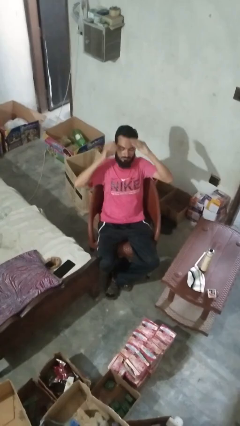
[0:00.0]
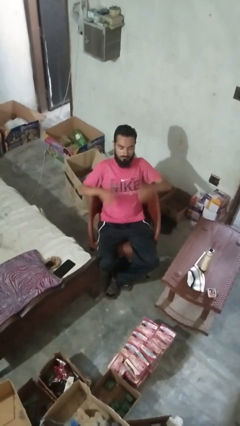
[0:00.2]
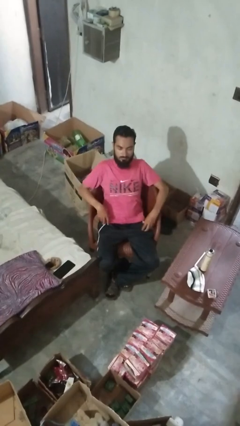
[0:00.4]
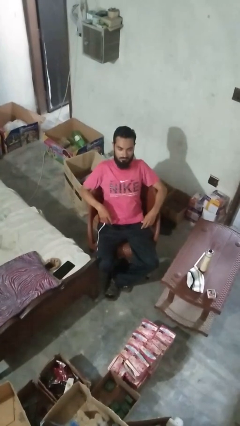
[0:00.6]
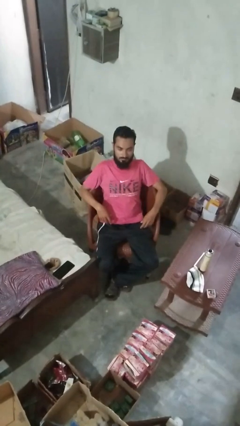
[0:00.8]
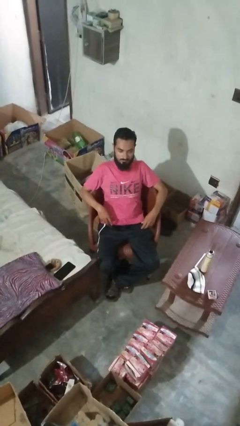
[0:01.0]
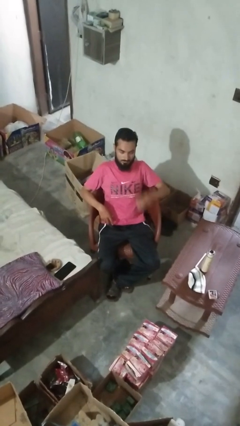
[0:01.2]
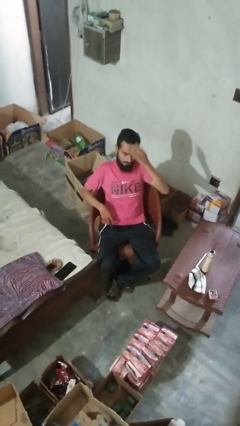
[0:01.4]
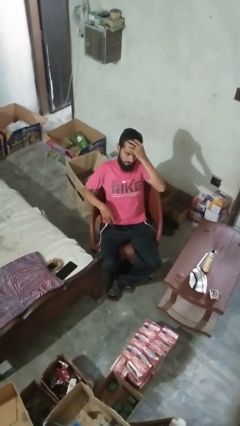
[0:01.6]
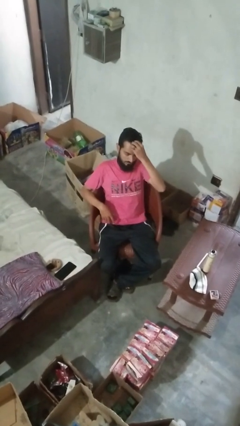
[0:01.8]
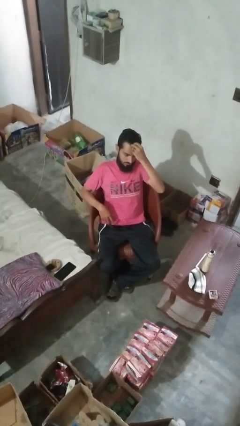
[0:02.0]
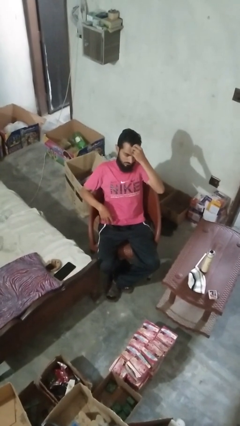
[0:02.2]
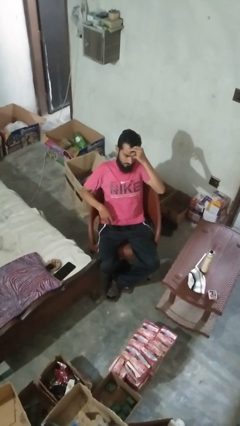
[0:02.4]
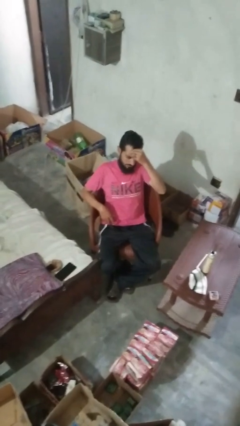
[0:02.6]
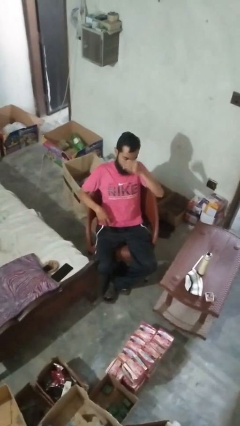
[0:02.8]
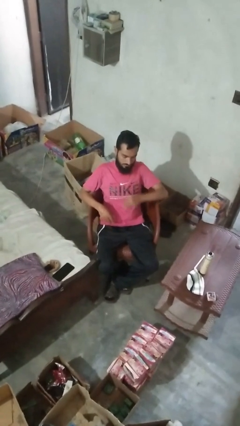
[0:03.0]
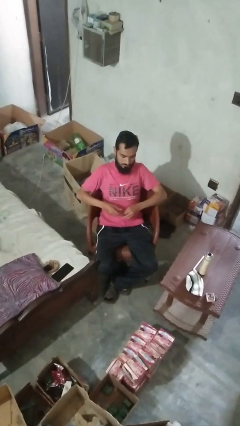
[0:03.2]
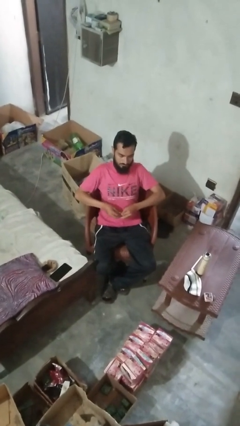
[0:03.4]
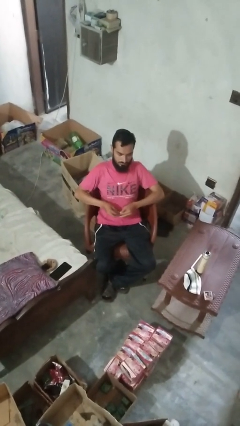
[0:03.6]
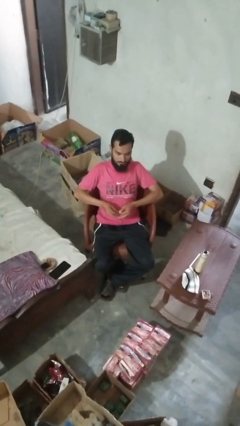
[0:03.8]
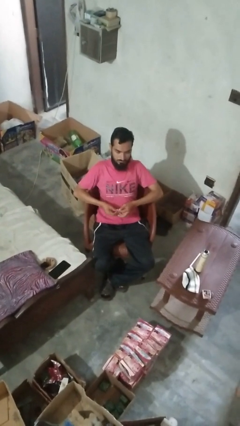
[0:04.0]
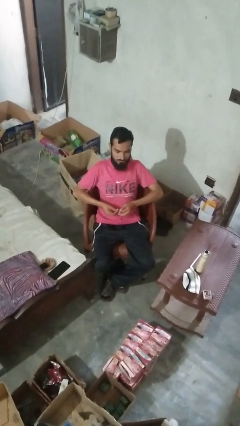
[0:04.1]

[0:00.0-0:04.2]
person takes off hairtie

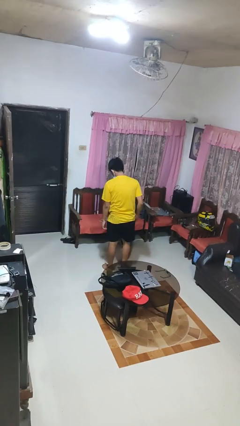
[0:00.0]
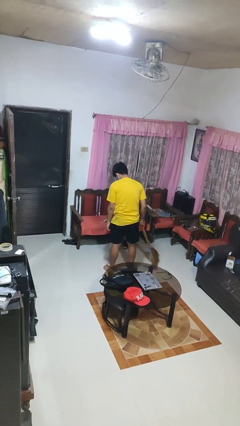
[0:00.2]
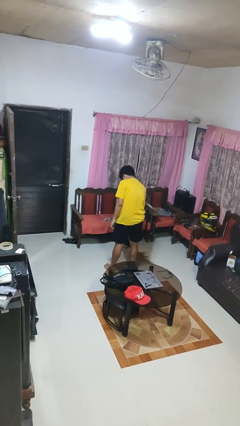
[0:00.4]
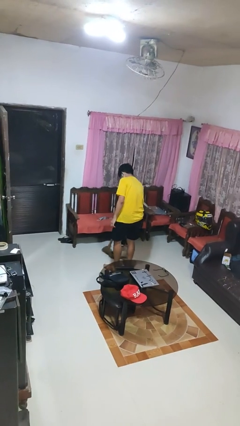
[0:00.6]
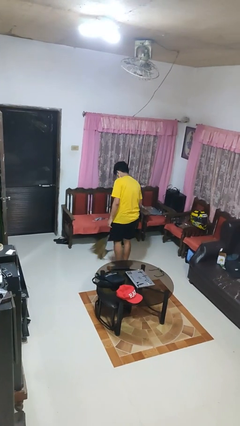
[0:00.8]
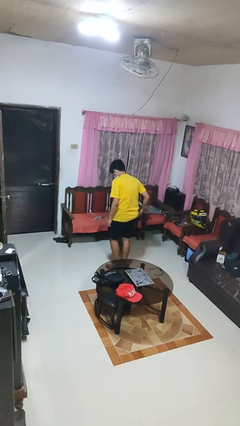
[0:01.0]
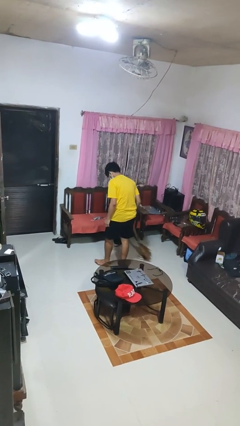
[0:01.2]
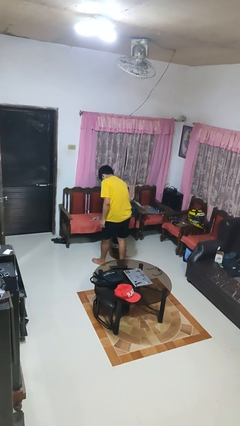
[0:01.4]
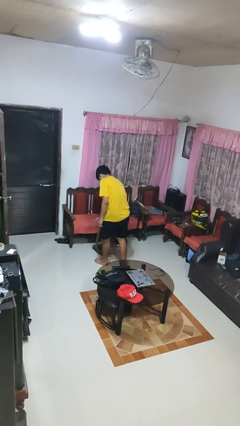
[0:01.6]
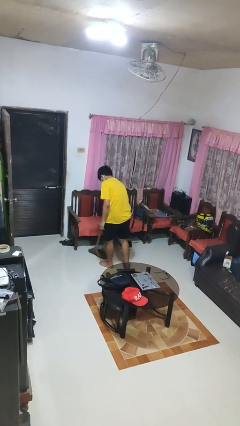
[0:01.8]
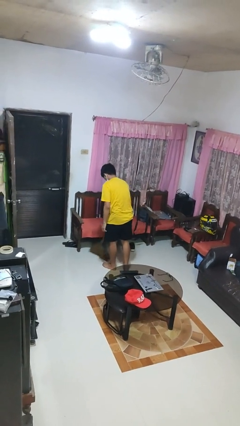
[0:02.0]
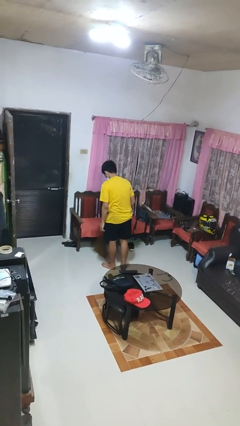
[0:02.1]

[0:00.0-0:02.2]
person sweeps floor

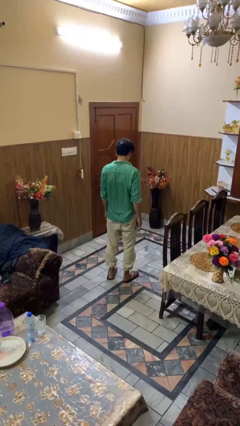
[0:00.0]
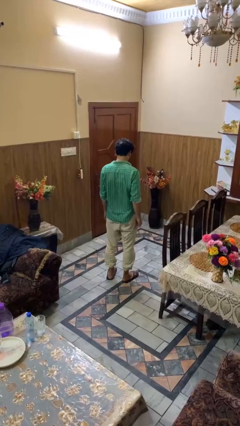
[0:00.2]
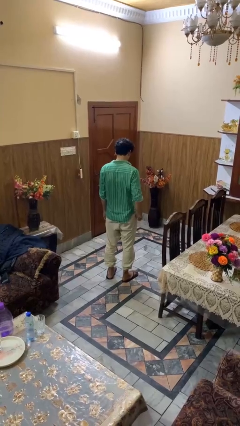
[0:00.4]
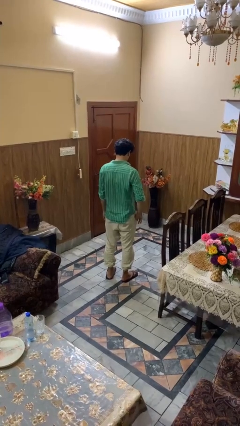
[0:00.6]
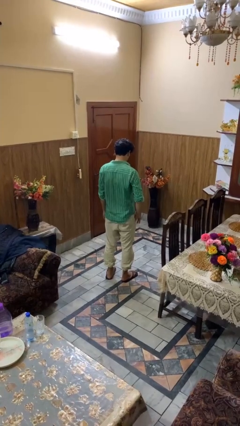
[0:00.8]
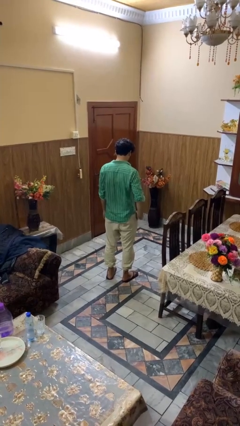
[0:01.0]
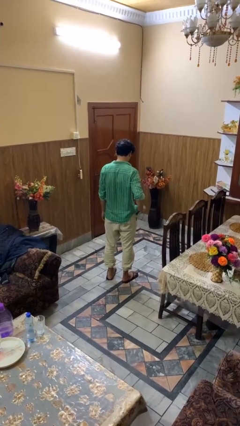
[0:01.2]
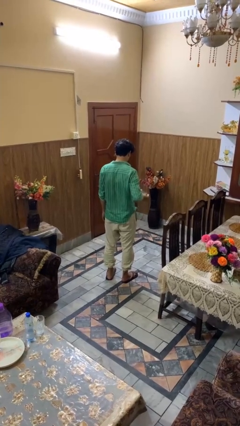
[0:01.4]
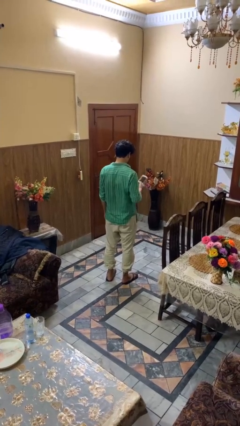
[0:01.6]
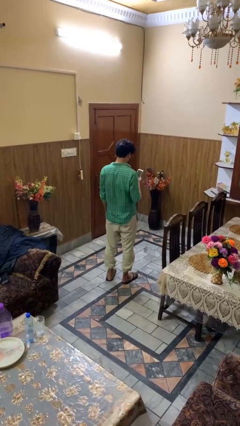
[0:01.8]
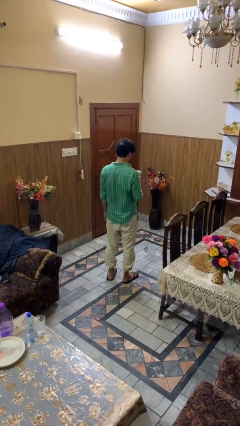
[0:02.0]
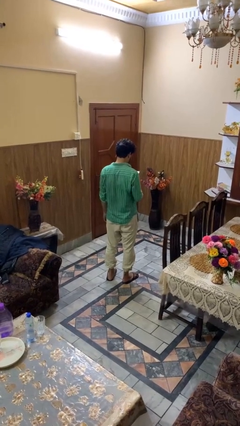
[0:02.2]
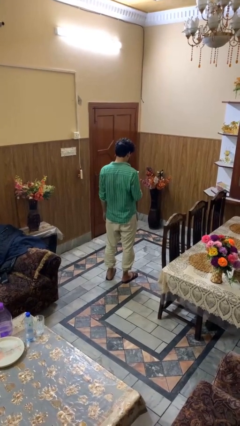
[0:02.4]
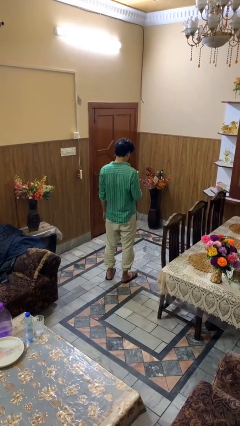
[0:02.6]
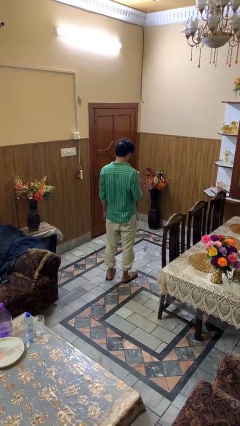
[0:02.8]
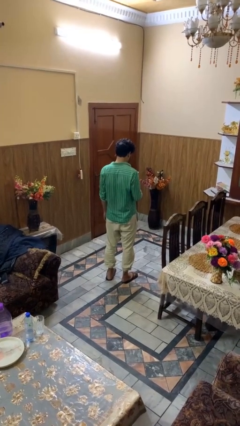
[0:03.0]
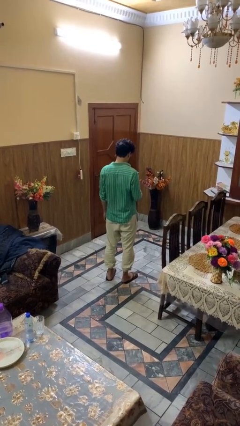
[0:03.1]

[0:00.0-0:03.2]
person takes phone from pocket

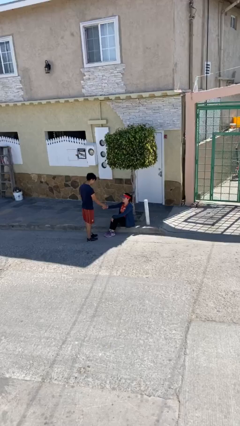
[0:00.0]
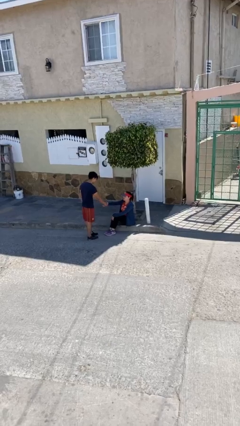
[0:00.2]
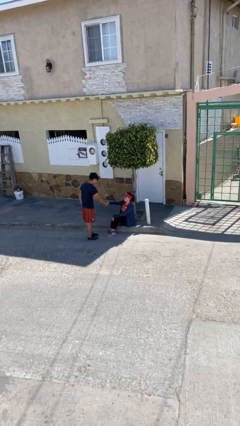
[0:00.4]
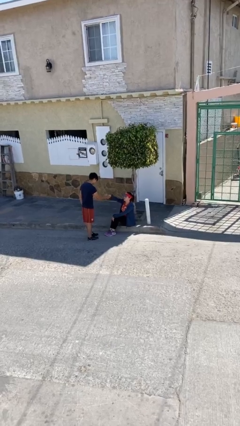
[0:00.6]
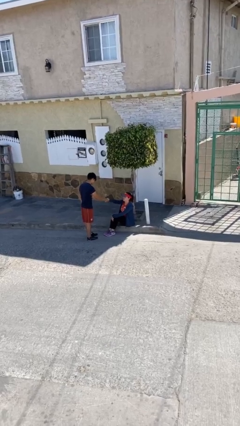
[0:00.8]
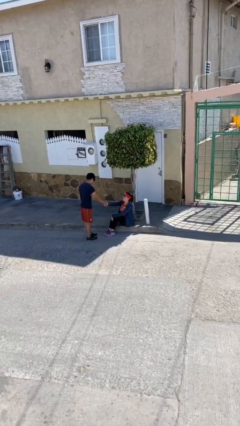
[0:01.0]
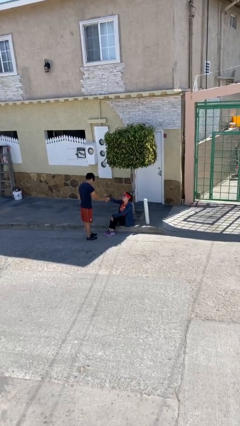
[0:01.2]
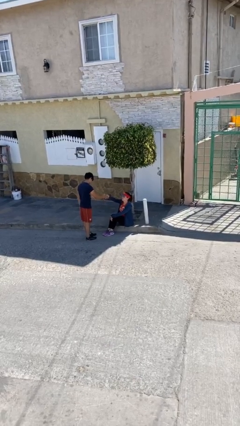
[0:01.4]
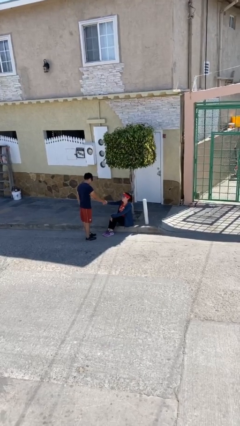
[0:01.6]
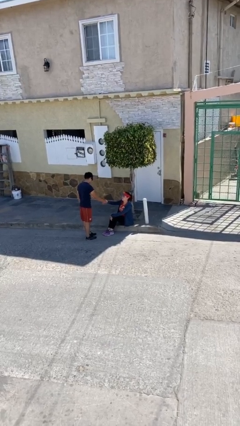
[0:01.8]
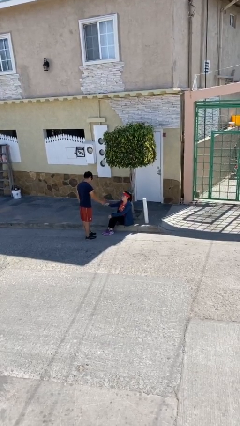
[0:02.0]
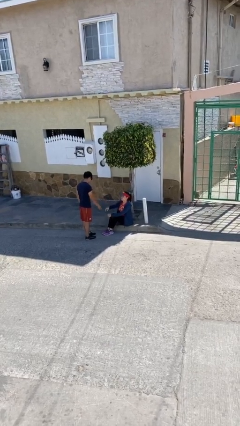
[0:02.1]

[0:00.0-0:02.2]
person shakes hand

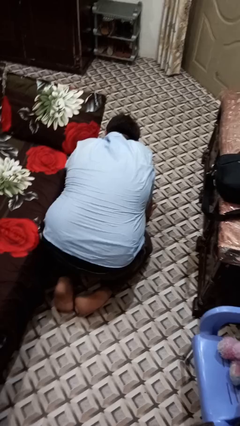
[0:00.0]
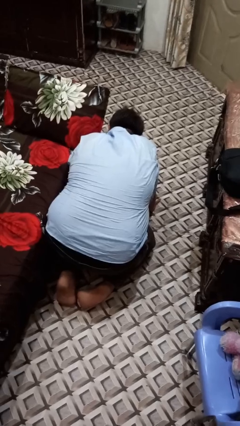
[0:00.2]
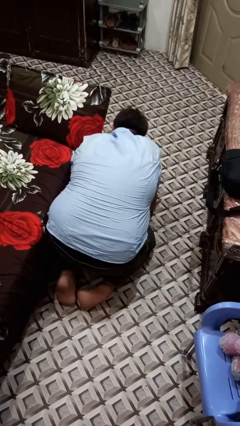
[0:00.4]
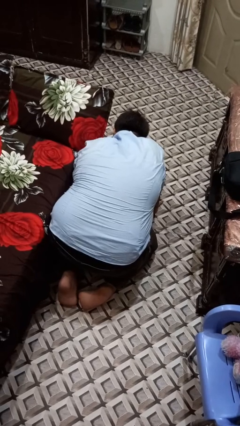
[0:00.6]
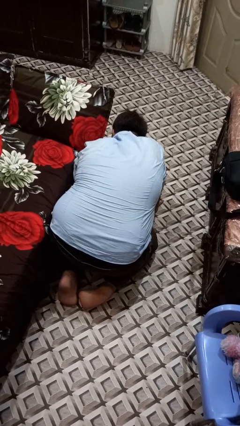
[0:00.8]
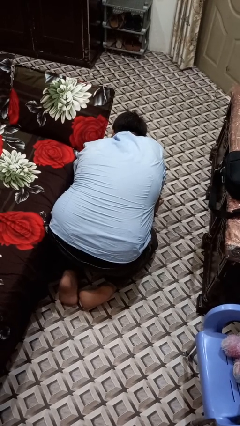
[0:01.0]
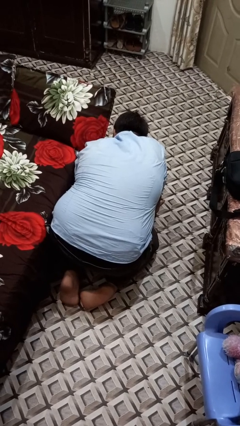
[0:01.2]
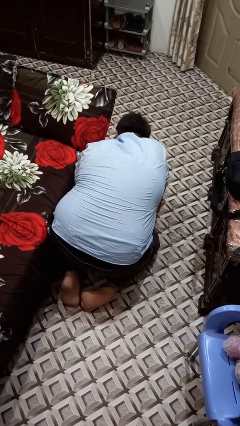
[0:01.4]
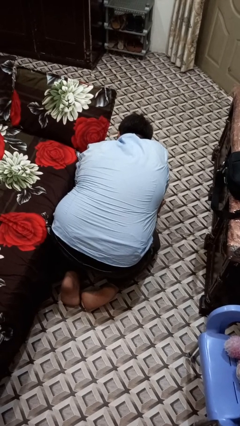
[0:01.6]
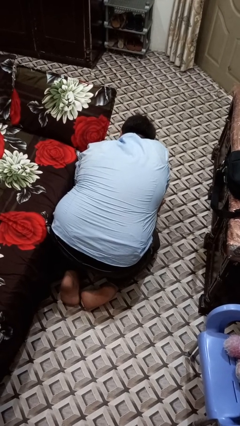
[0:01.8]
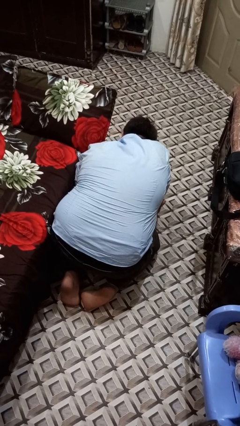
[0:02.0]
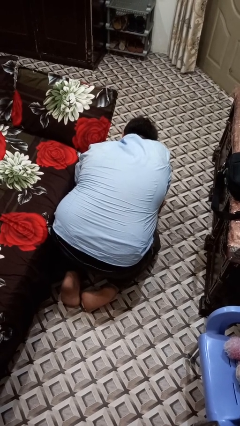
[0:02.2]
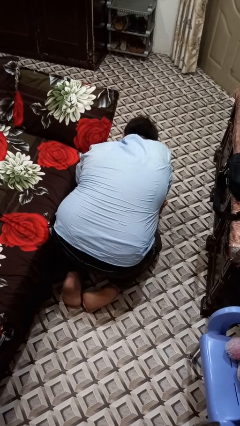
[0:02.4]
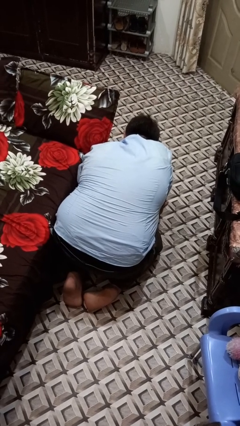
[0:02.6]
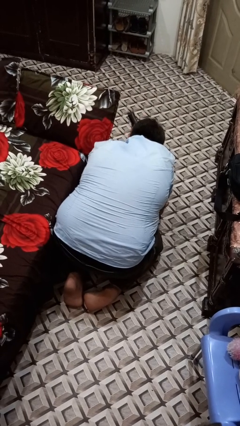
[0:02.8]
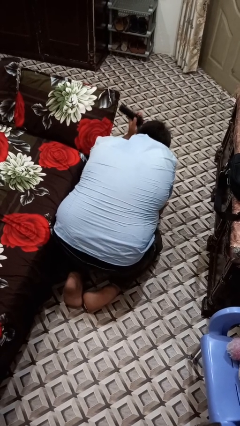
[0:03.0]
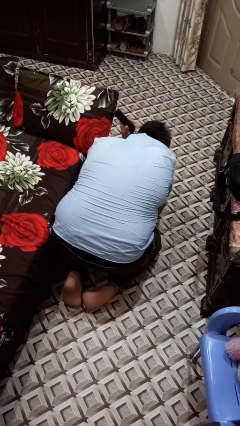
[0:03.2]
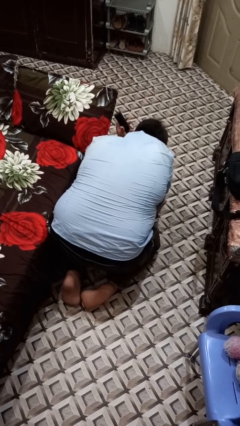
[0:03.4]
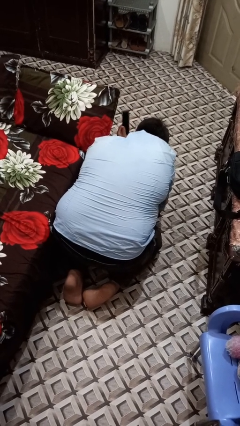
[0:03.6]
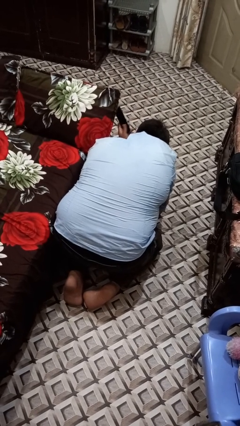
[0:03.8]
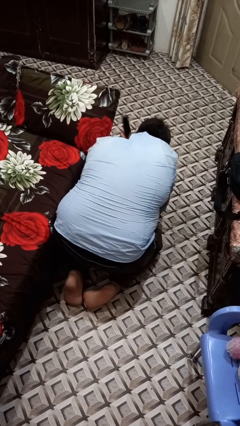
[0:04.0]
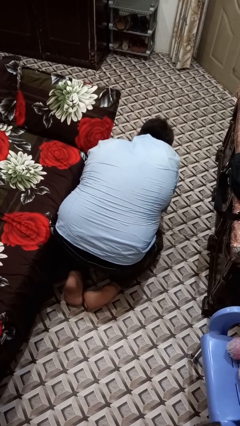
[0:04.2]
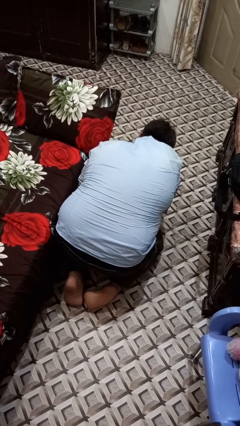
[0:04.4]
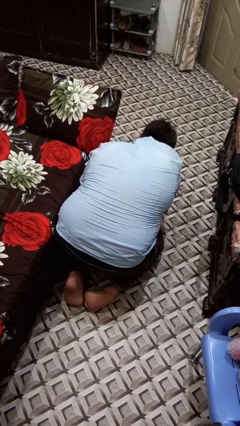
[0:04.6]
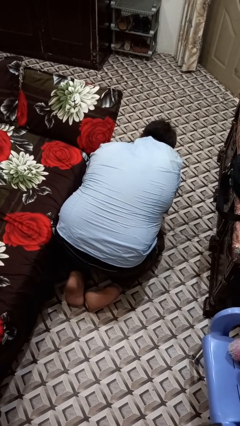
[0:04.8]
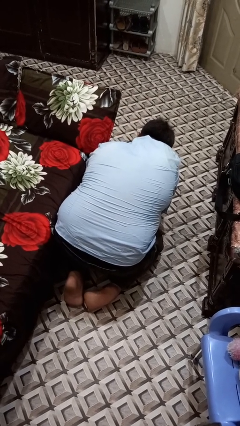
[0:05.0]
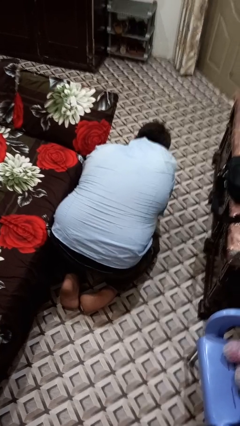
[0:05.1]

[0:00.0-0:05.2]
person searches under couch

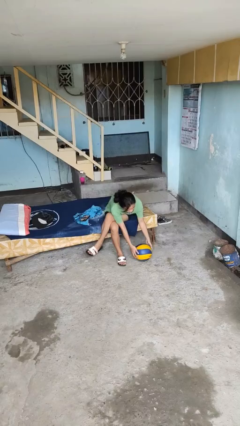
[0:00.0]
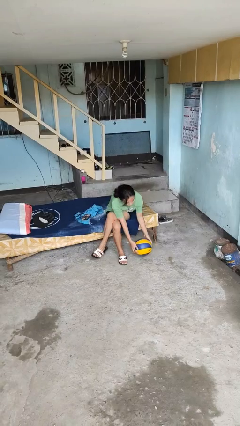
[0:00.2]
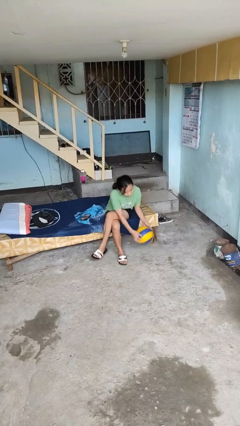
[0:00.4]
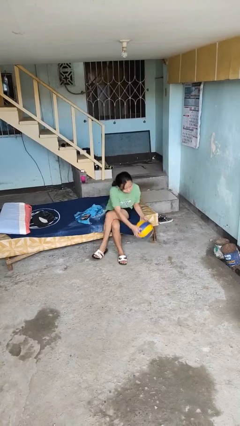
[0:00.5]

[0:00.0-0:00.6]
person picks up object from floor
